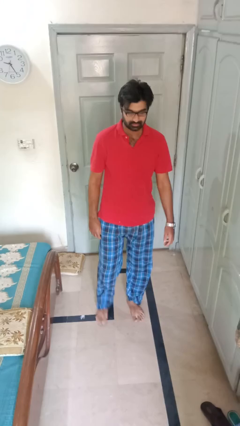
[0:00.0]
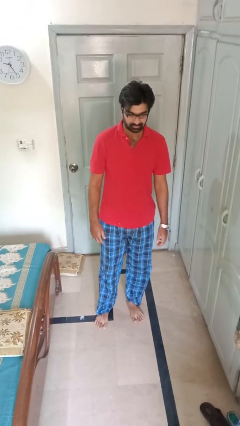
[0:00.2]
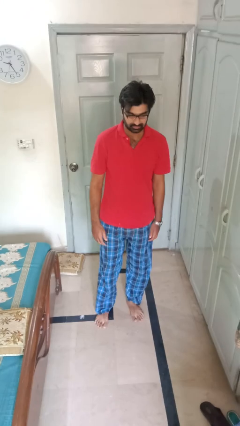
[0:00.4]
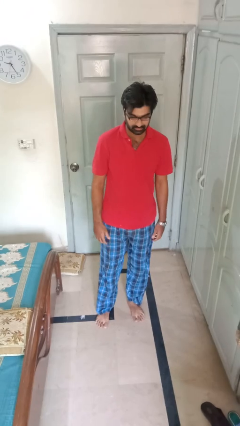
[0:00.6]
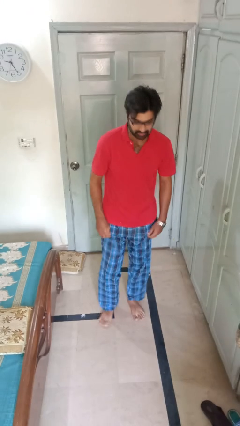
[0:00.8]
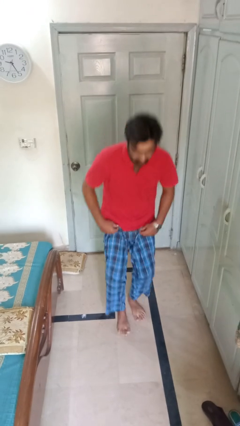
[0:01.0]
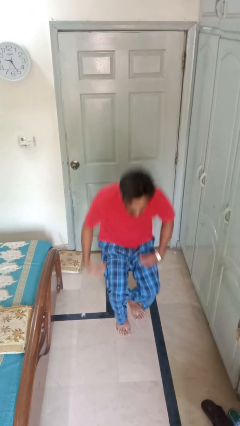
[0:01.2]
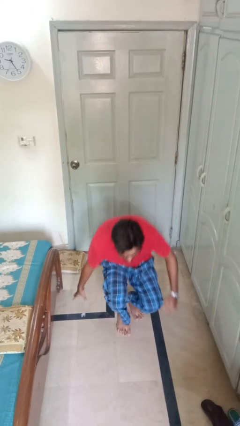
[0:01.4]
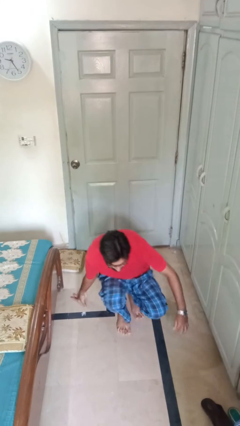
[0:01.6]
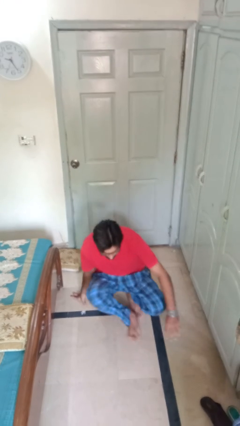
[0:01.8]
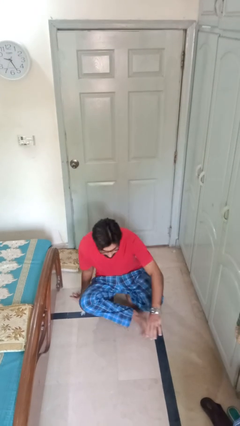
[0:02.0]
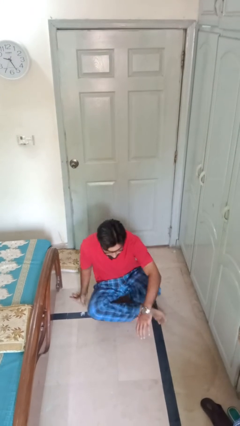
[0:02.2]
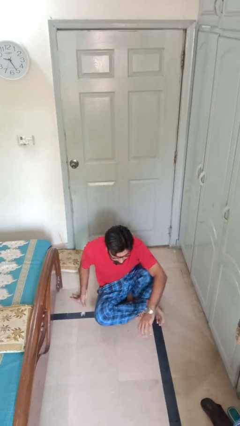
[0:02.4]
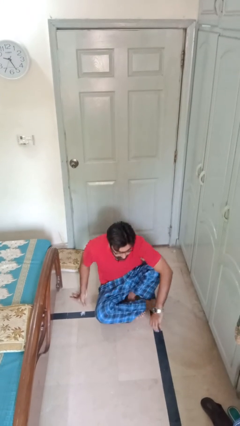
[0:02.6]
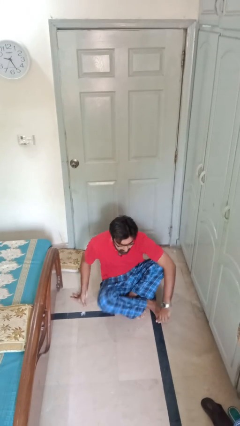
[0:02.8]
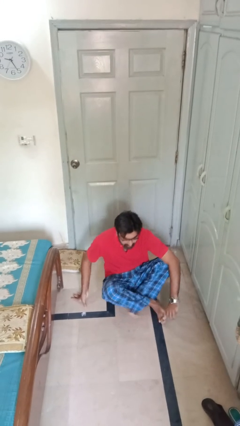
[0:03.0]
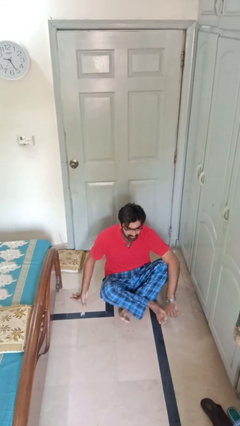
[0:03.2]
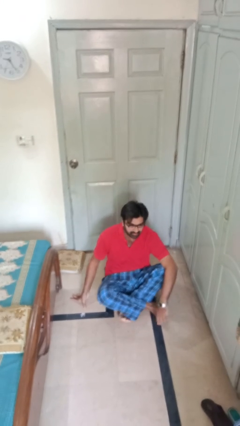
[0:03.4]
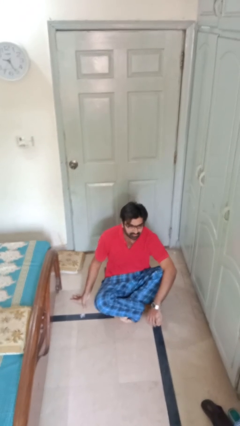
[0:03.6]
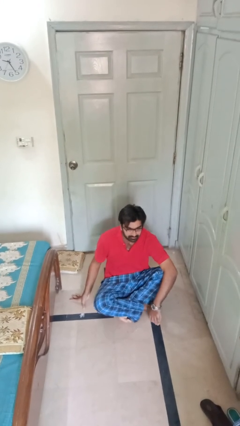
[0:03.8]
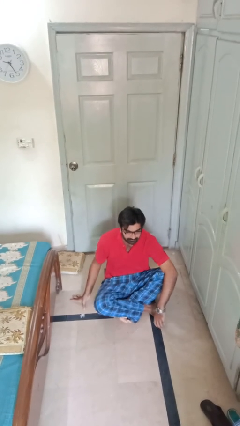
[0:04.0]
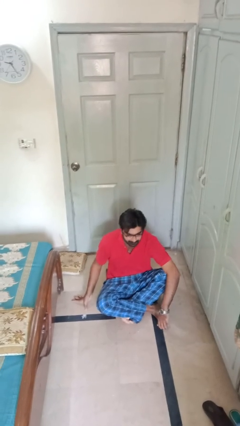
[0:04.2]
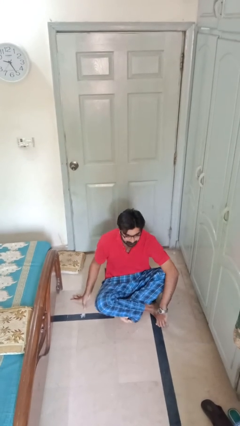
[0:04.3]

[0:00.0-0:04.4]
person sits crisscross

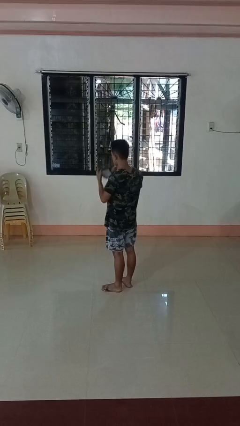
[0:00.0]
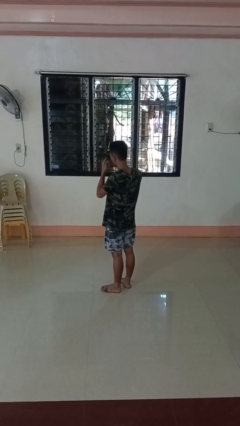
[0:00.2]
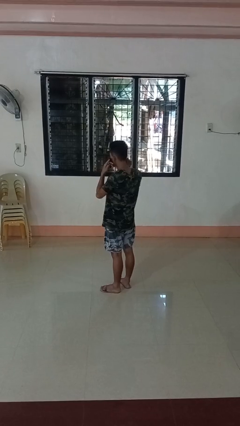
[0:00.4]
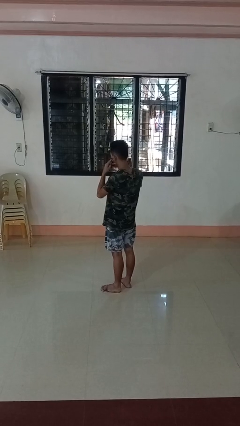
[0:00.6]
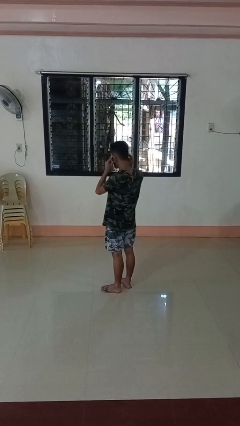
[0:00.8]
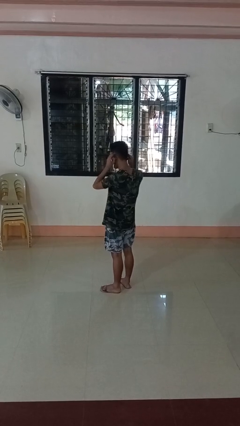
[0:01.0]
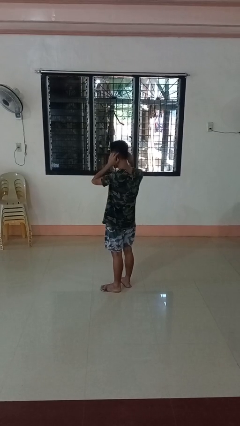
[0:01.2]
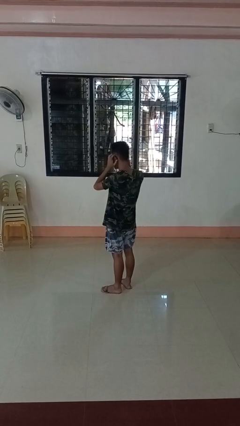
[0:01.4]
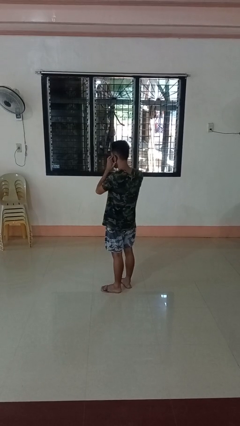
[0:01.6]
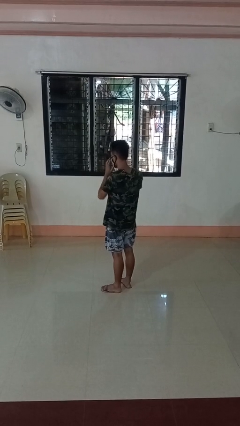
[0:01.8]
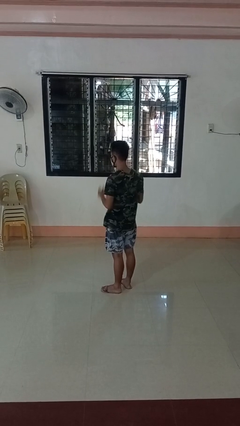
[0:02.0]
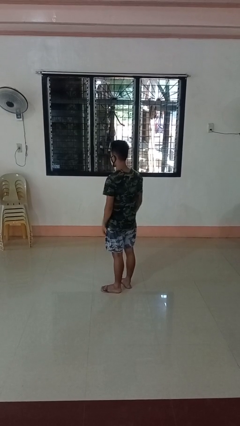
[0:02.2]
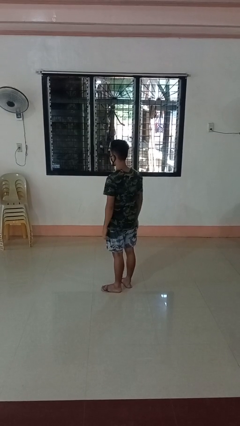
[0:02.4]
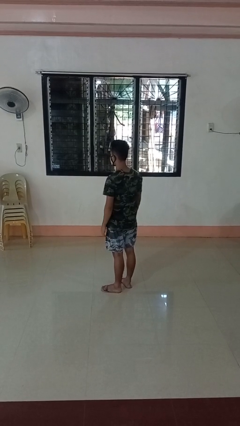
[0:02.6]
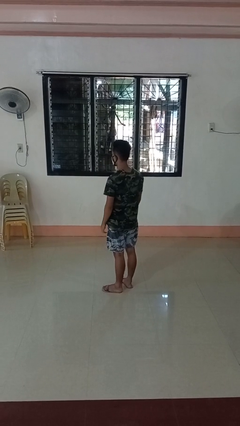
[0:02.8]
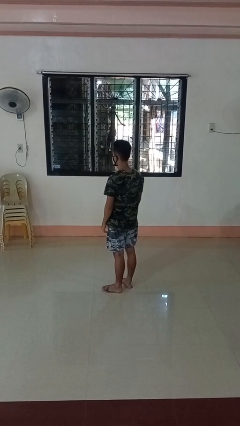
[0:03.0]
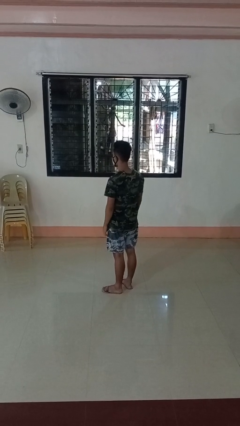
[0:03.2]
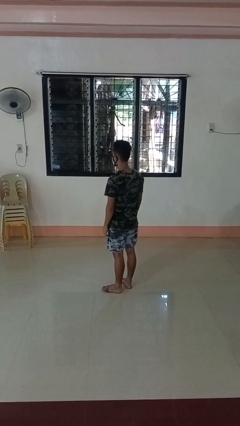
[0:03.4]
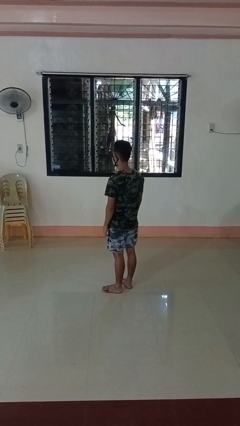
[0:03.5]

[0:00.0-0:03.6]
person puts on facemask

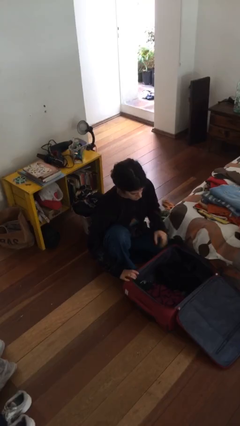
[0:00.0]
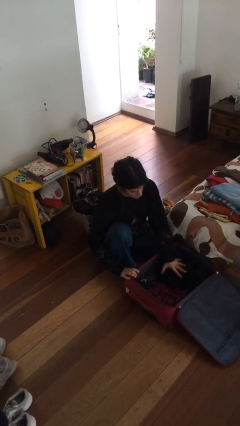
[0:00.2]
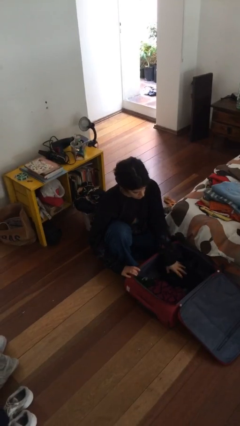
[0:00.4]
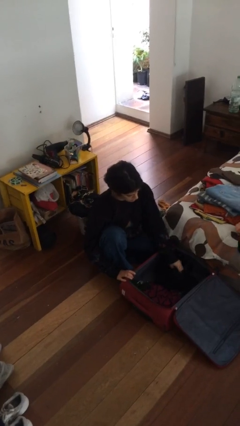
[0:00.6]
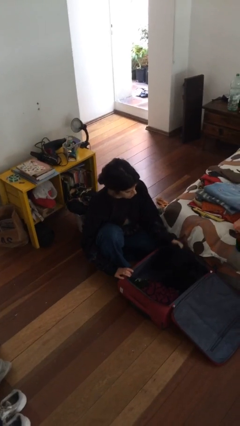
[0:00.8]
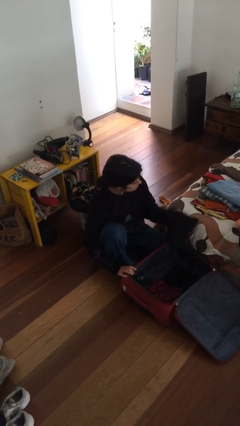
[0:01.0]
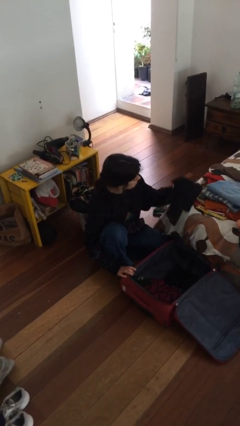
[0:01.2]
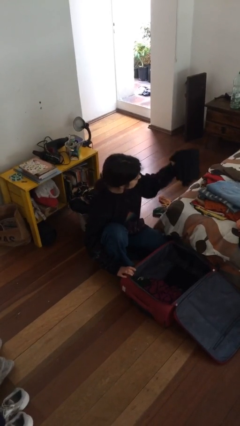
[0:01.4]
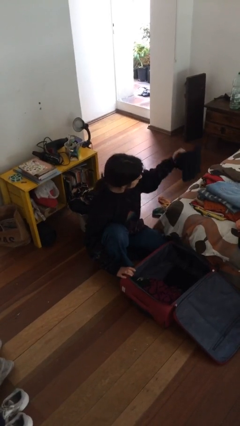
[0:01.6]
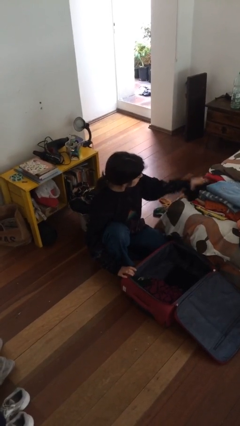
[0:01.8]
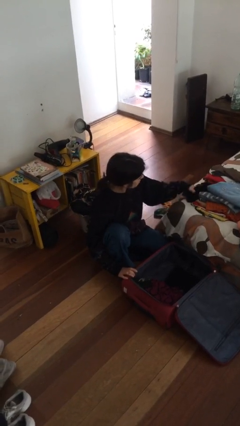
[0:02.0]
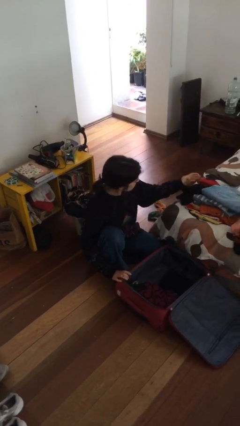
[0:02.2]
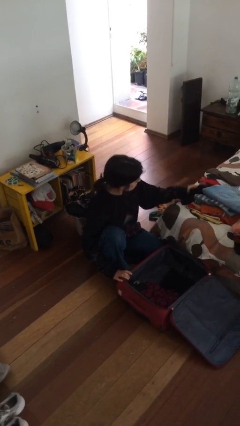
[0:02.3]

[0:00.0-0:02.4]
person unloads clothes from suitcase

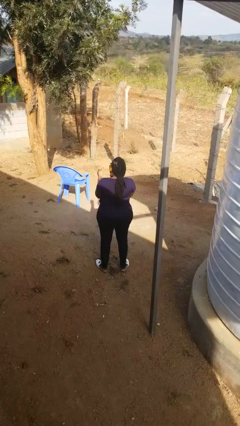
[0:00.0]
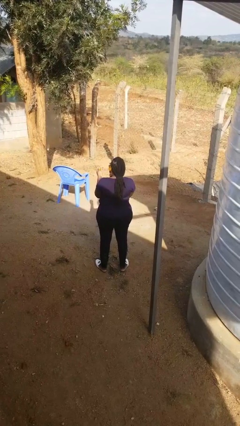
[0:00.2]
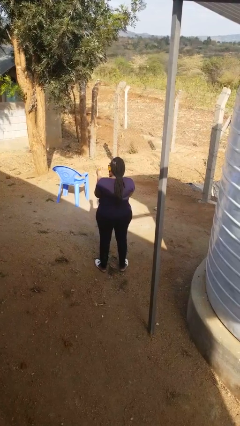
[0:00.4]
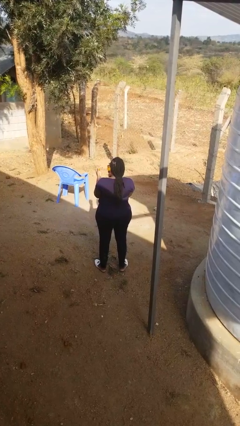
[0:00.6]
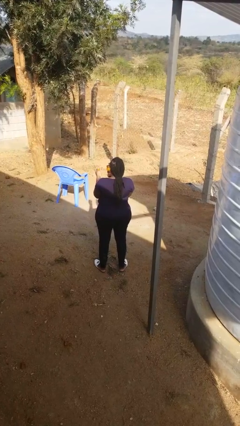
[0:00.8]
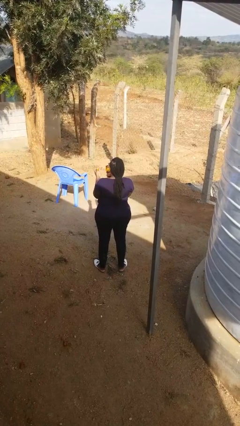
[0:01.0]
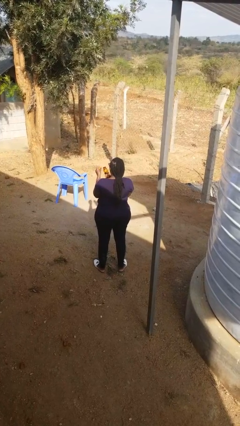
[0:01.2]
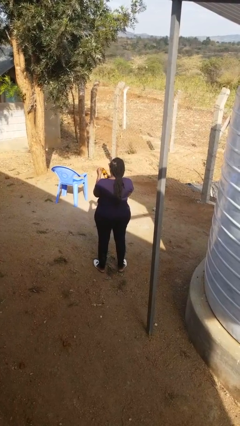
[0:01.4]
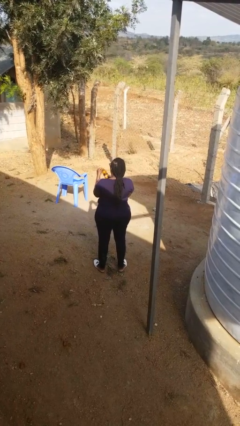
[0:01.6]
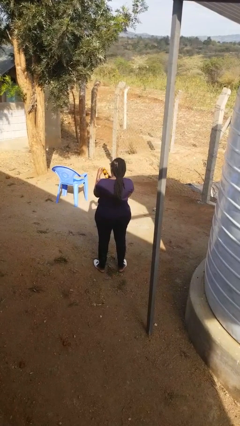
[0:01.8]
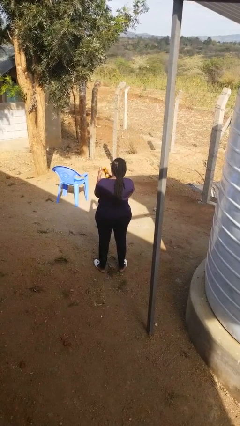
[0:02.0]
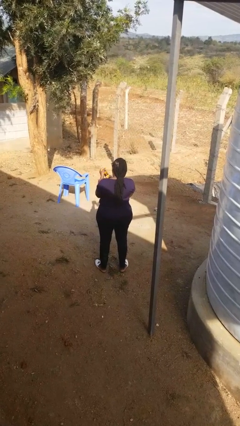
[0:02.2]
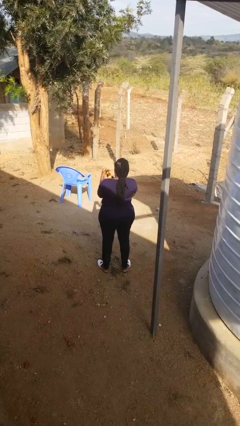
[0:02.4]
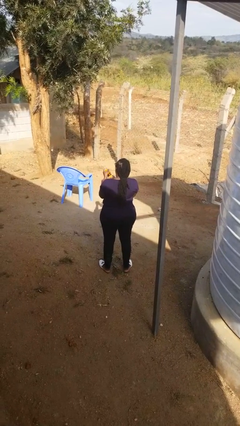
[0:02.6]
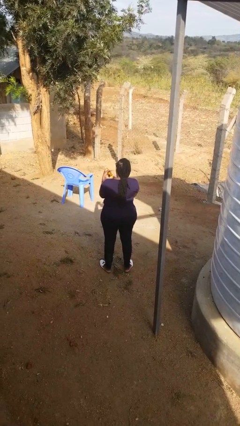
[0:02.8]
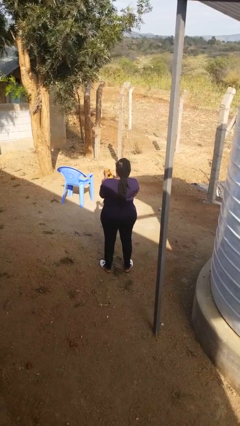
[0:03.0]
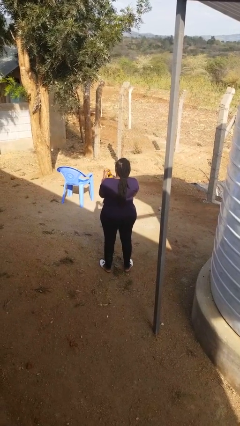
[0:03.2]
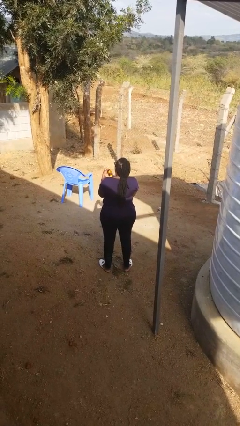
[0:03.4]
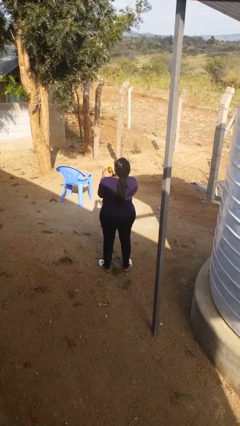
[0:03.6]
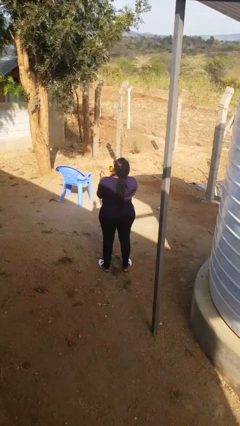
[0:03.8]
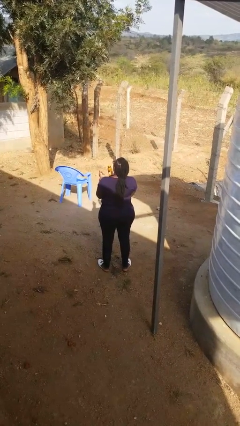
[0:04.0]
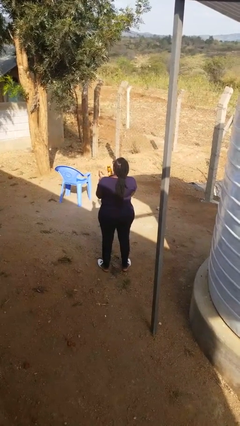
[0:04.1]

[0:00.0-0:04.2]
person closes jar

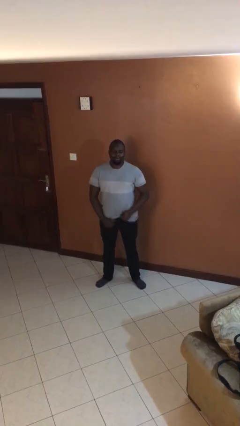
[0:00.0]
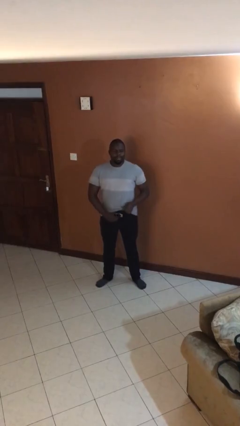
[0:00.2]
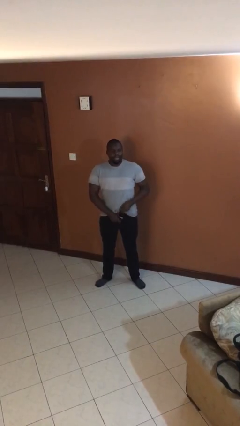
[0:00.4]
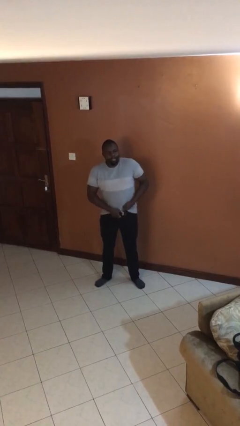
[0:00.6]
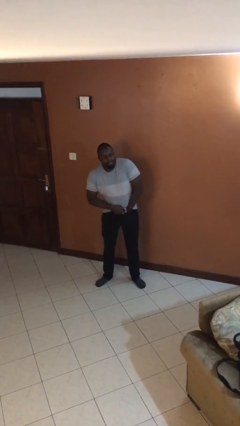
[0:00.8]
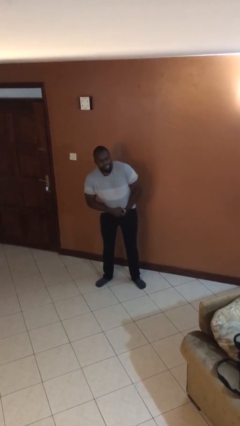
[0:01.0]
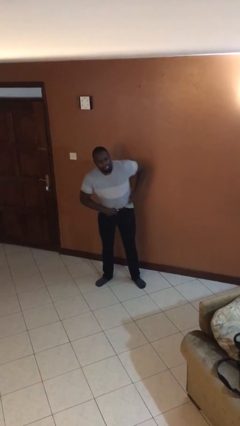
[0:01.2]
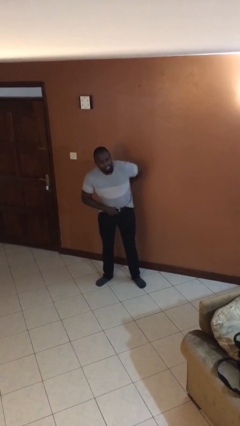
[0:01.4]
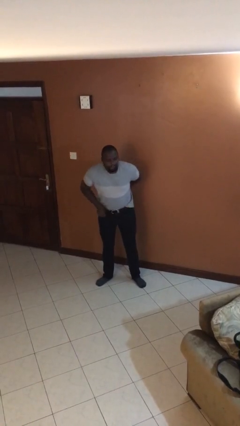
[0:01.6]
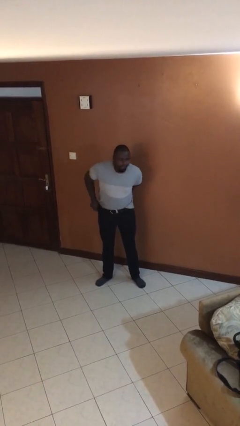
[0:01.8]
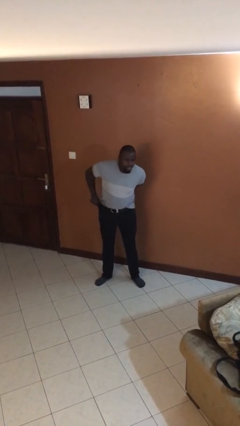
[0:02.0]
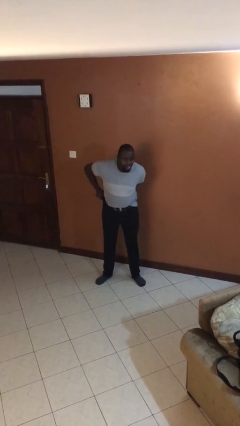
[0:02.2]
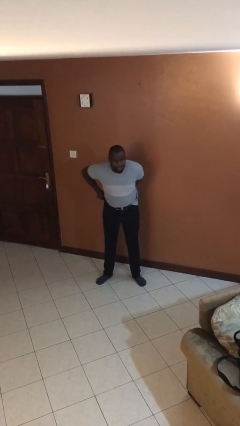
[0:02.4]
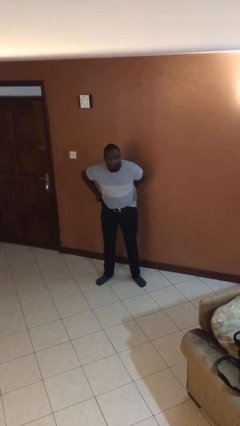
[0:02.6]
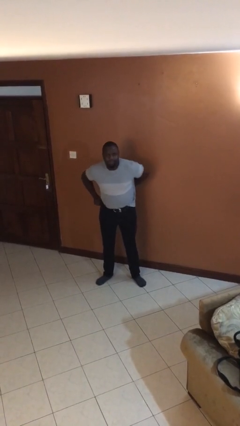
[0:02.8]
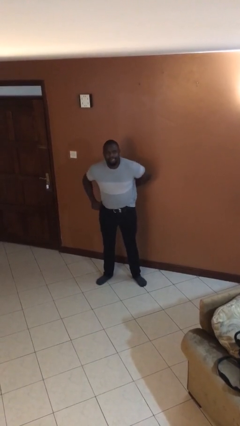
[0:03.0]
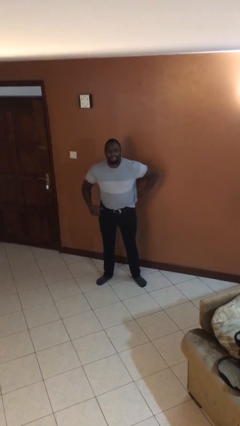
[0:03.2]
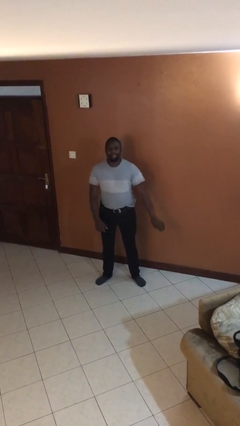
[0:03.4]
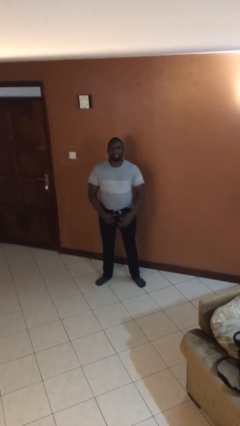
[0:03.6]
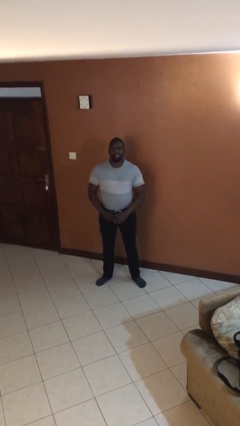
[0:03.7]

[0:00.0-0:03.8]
person tucks in shirt
